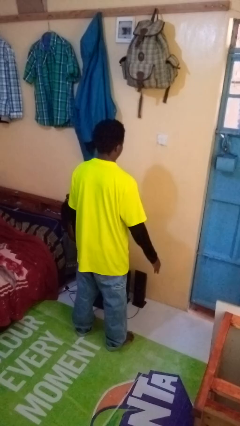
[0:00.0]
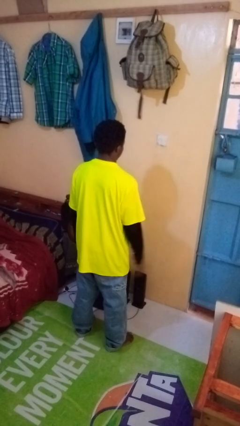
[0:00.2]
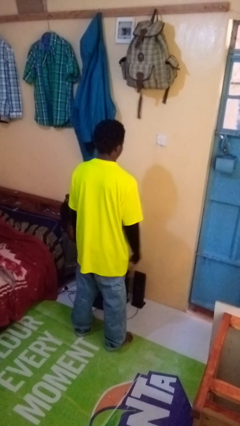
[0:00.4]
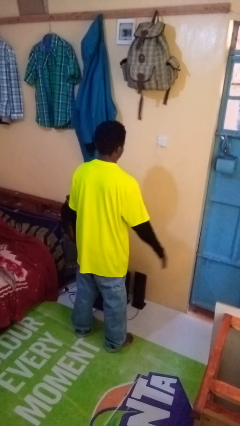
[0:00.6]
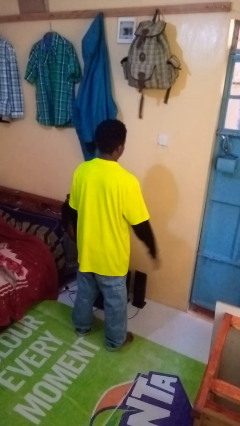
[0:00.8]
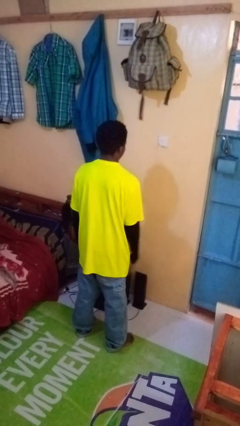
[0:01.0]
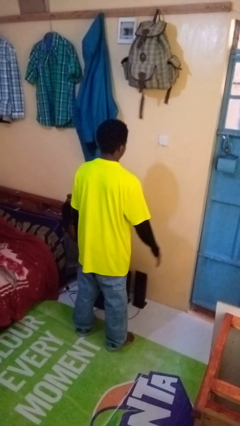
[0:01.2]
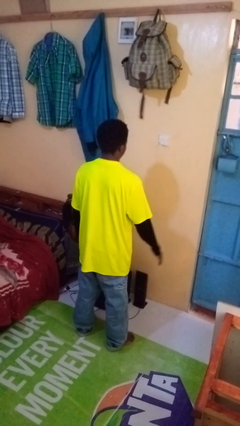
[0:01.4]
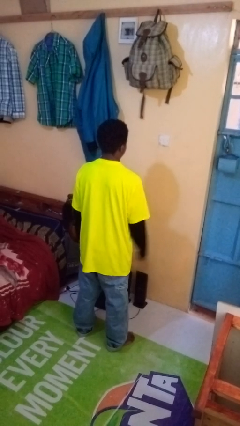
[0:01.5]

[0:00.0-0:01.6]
person slaps hands on thighs

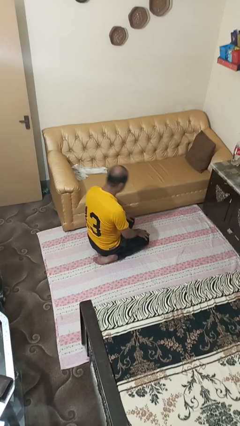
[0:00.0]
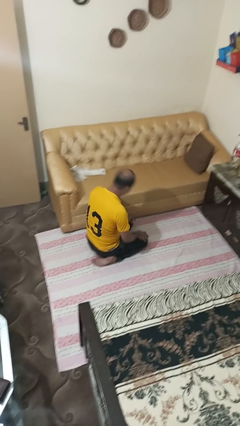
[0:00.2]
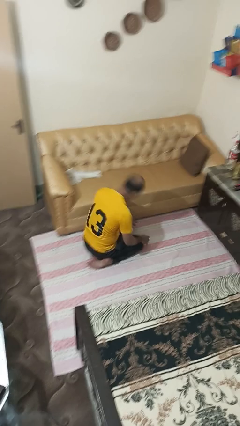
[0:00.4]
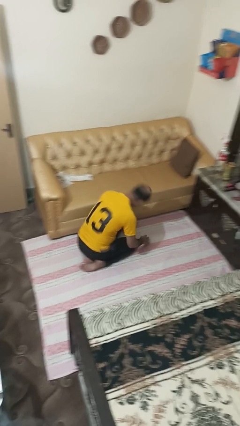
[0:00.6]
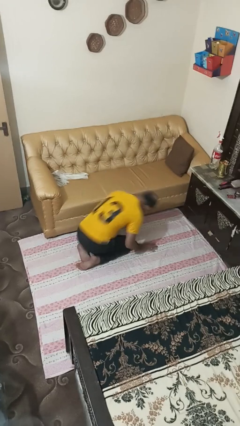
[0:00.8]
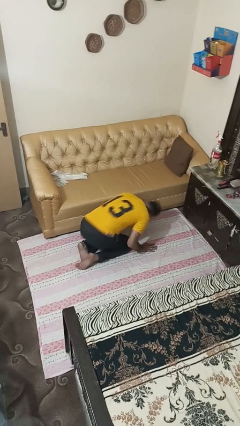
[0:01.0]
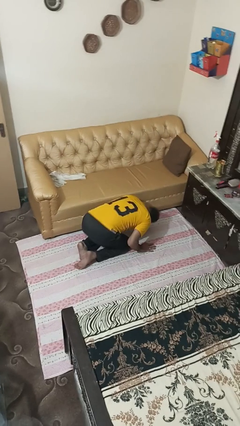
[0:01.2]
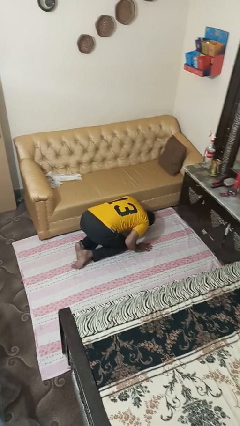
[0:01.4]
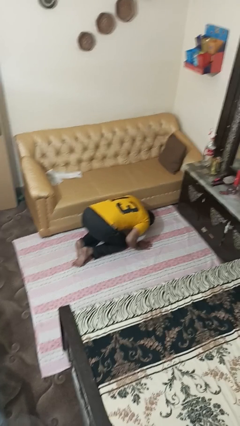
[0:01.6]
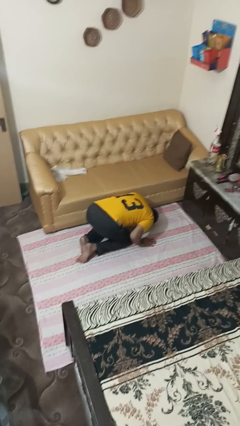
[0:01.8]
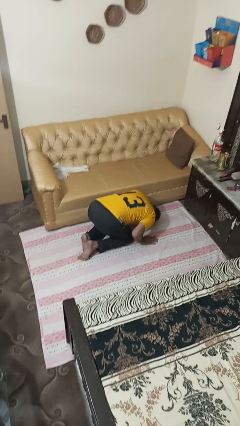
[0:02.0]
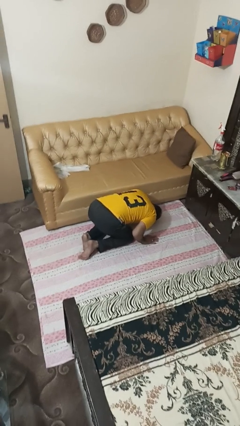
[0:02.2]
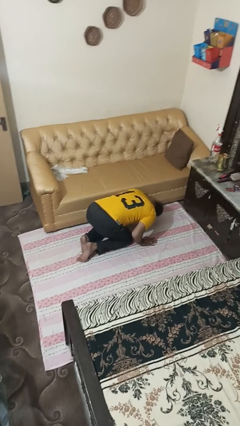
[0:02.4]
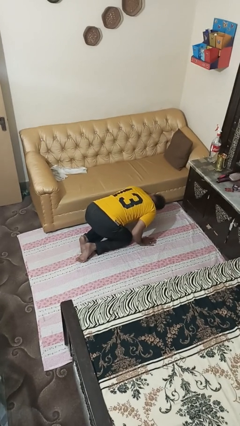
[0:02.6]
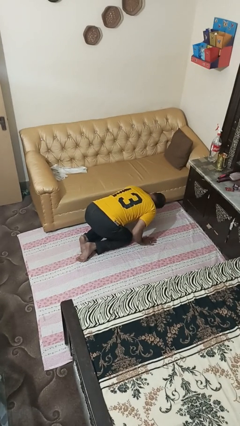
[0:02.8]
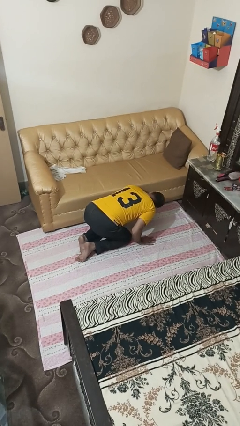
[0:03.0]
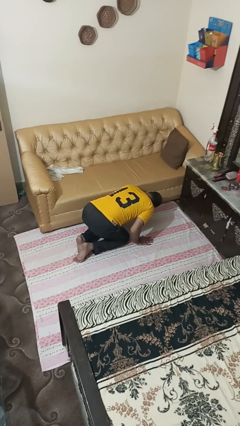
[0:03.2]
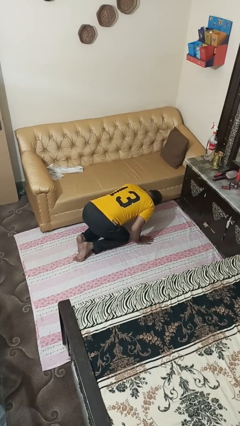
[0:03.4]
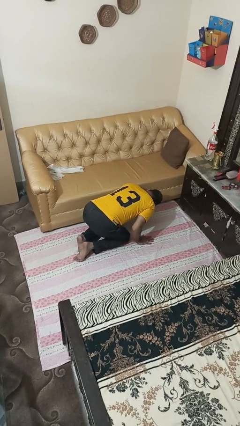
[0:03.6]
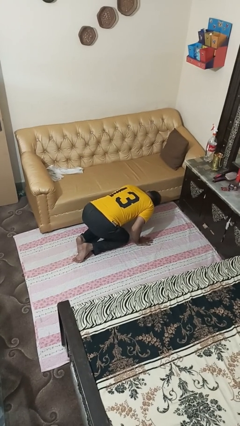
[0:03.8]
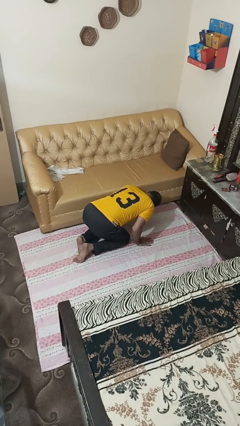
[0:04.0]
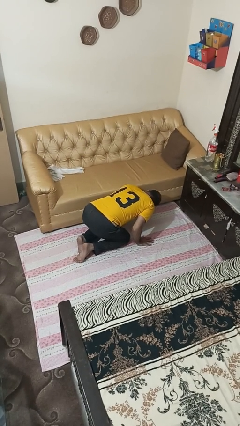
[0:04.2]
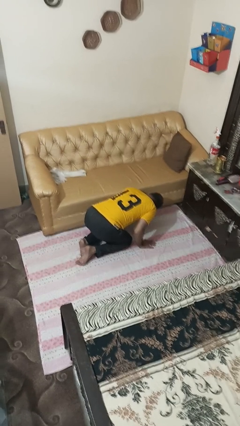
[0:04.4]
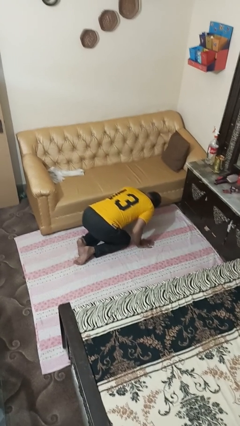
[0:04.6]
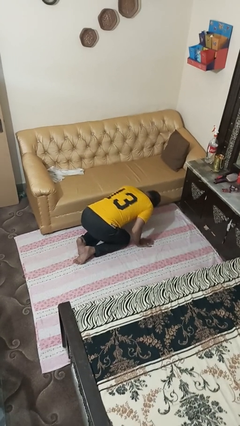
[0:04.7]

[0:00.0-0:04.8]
person searches under couch

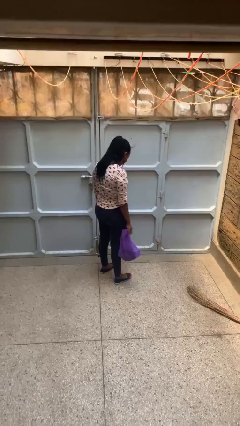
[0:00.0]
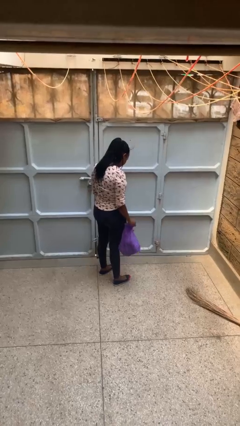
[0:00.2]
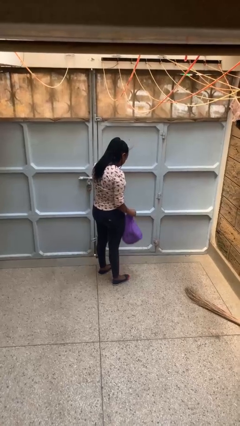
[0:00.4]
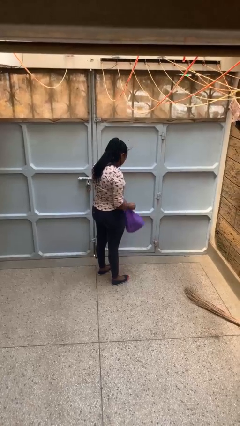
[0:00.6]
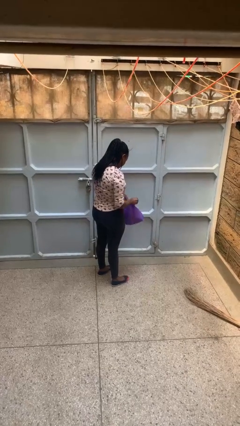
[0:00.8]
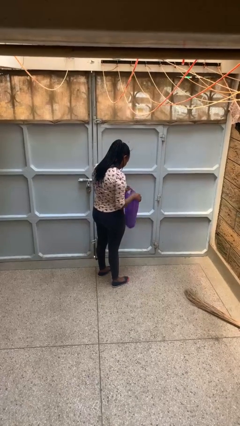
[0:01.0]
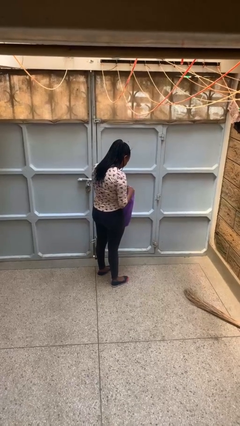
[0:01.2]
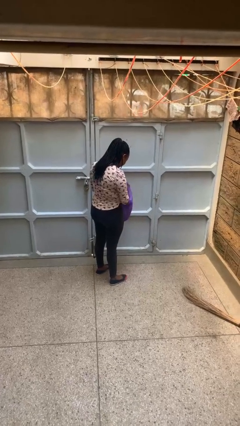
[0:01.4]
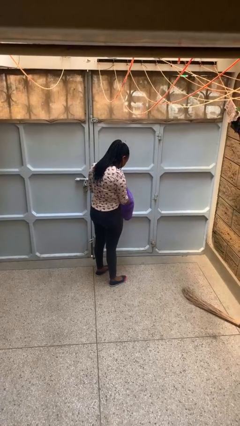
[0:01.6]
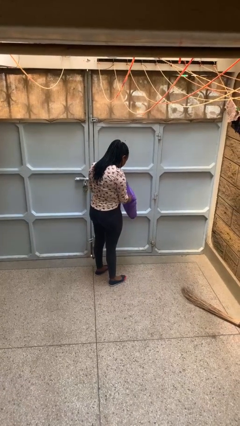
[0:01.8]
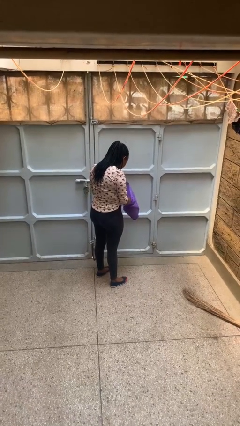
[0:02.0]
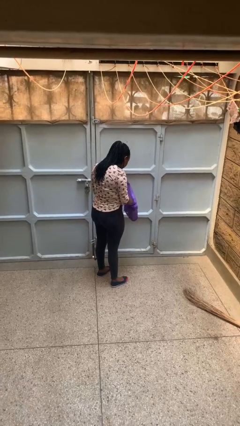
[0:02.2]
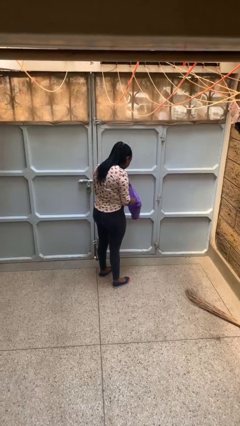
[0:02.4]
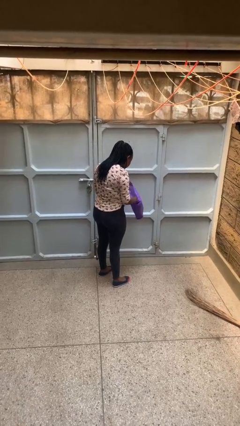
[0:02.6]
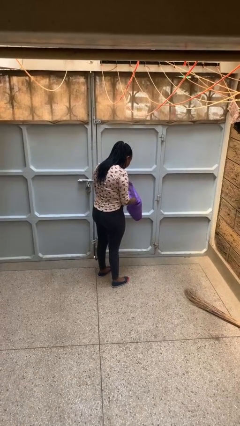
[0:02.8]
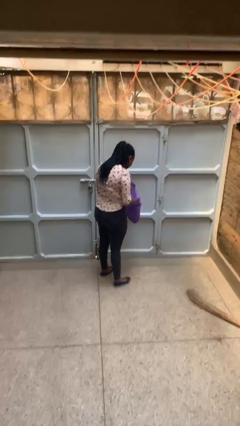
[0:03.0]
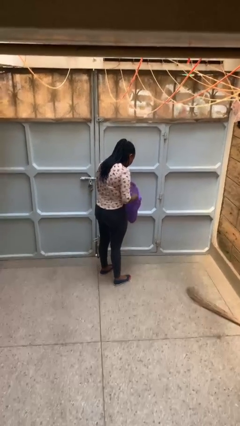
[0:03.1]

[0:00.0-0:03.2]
person searches in bag

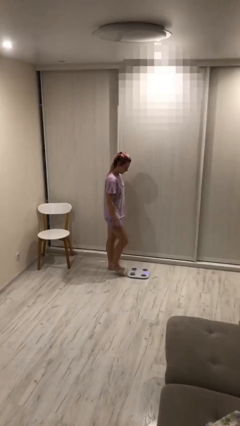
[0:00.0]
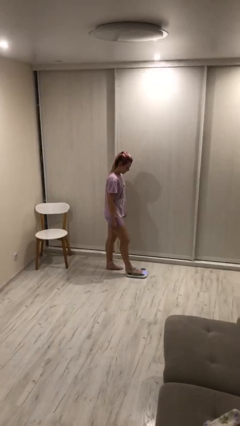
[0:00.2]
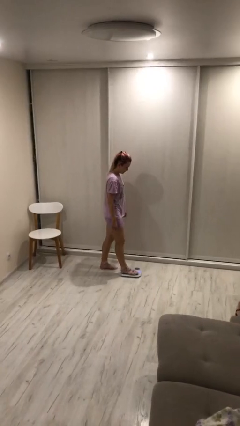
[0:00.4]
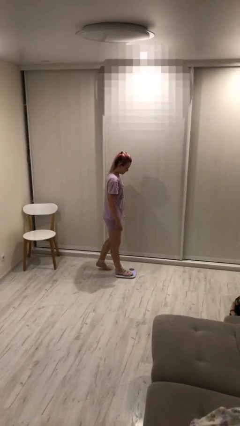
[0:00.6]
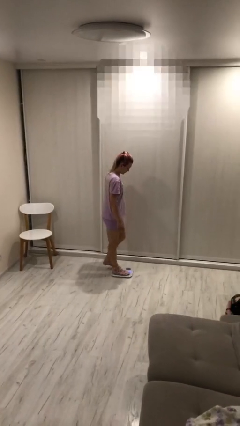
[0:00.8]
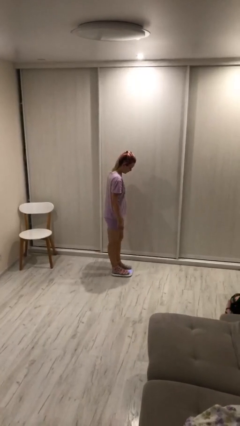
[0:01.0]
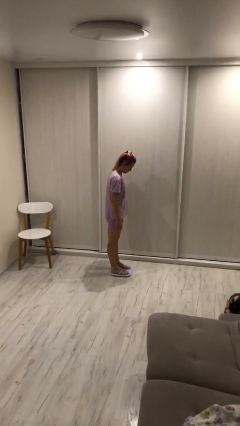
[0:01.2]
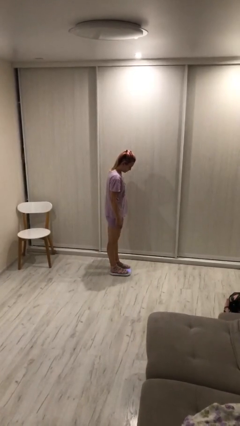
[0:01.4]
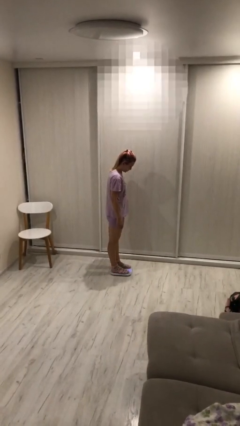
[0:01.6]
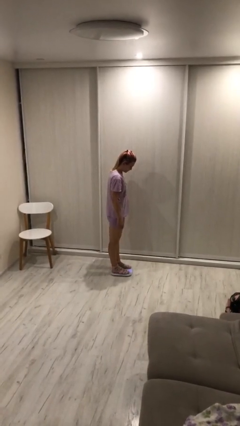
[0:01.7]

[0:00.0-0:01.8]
person uses bodyweight scale

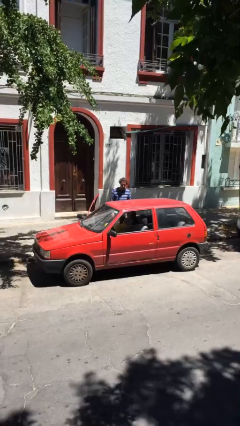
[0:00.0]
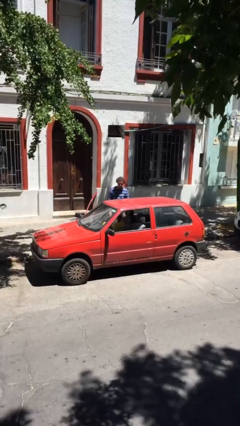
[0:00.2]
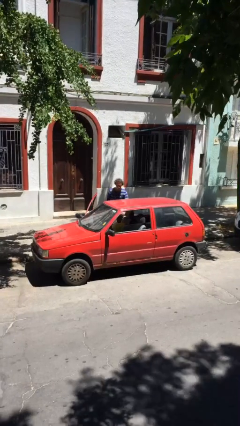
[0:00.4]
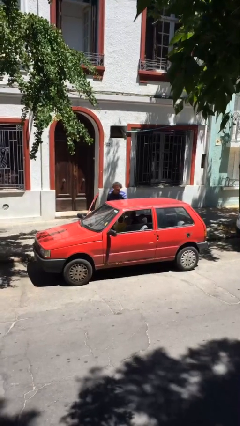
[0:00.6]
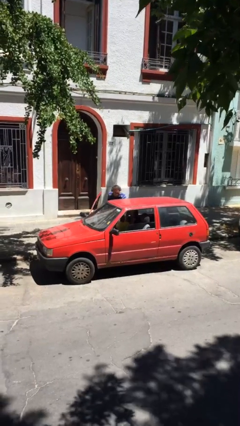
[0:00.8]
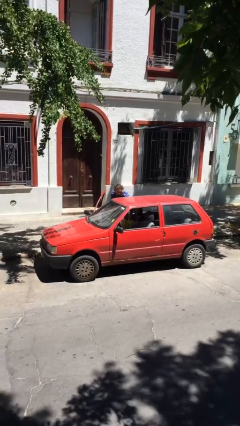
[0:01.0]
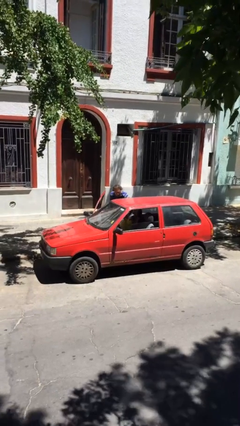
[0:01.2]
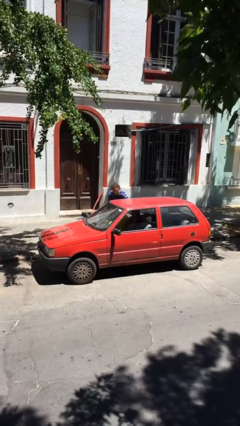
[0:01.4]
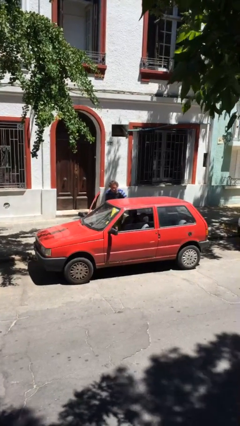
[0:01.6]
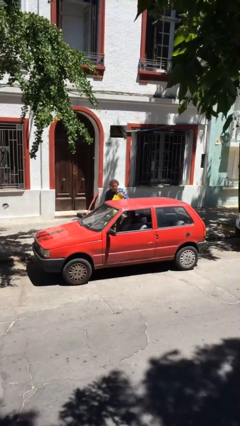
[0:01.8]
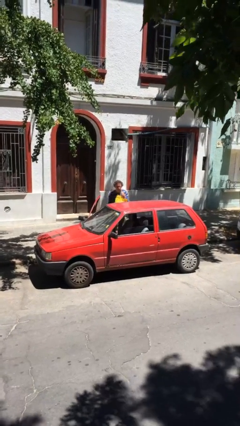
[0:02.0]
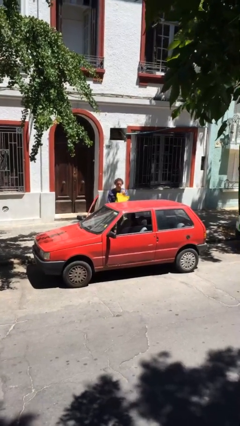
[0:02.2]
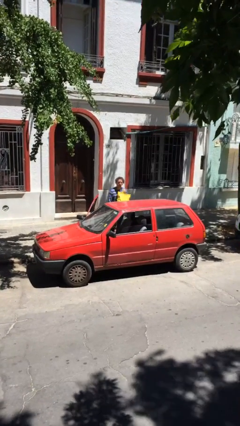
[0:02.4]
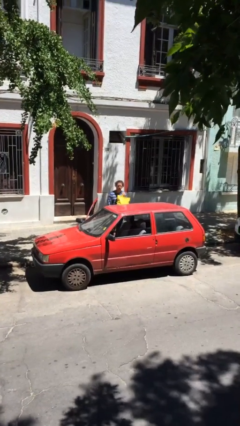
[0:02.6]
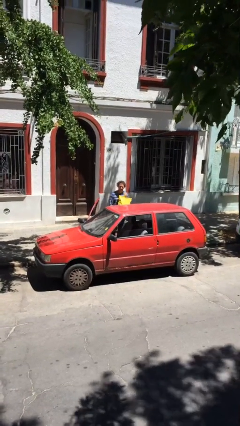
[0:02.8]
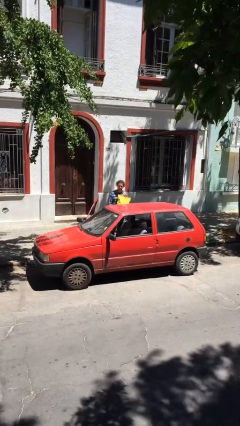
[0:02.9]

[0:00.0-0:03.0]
person unloads car

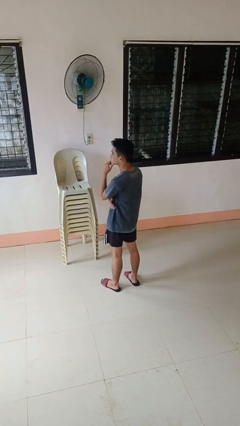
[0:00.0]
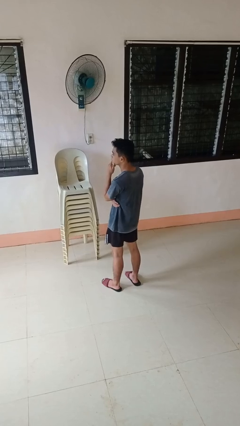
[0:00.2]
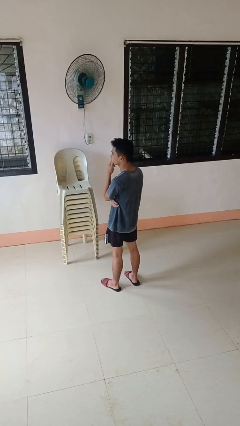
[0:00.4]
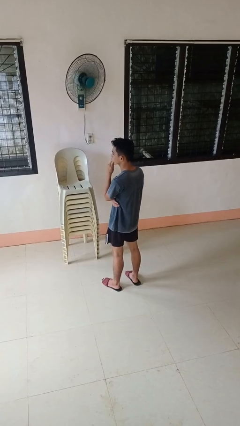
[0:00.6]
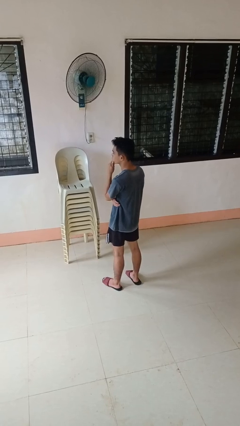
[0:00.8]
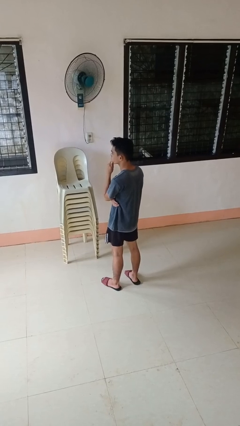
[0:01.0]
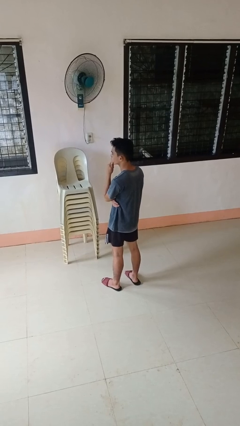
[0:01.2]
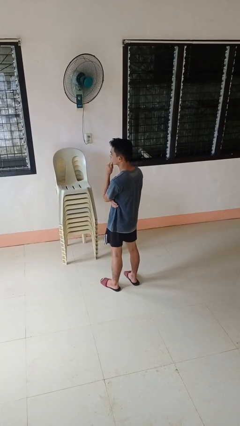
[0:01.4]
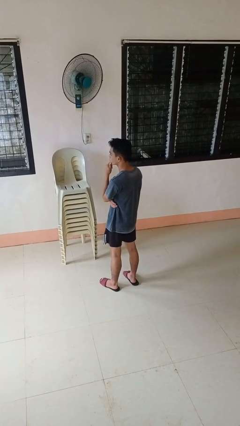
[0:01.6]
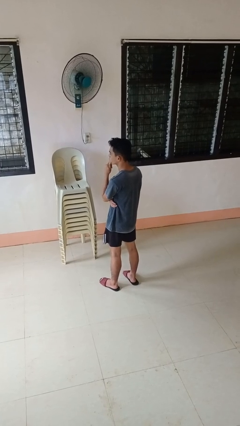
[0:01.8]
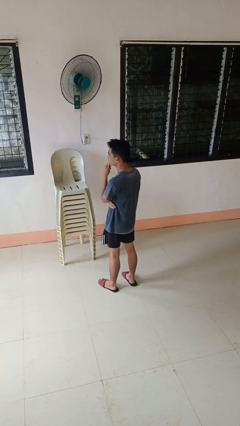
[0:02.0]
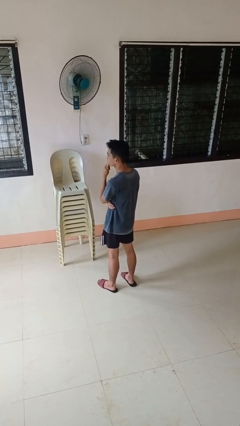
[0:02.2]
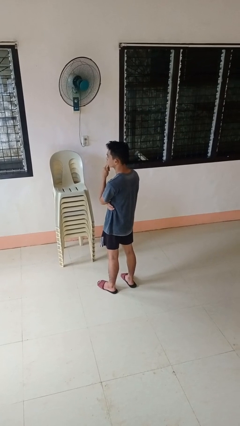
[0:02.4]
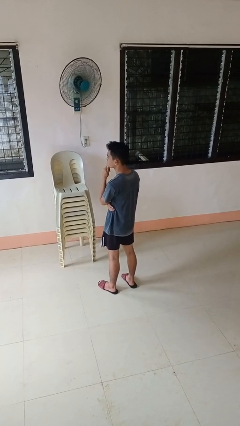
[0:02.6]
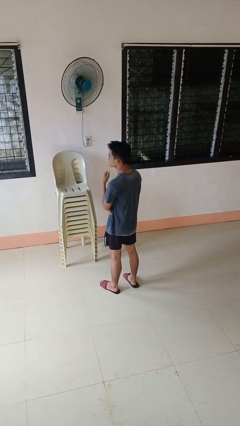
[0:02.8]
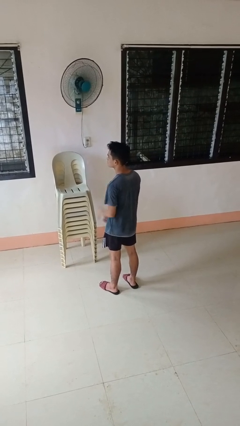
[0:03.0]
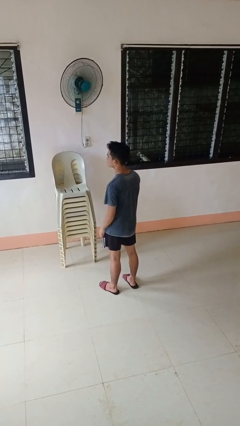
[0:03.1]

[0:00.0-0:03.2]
person strokes chin
